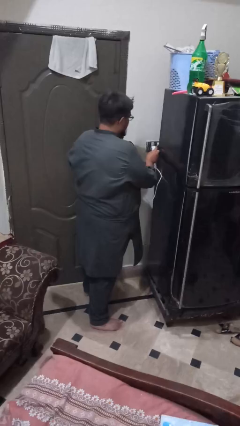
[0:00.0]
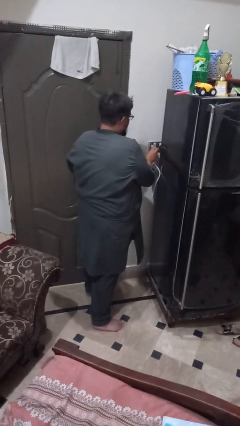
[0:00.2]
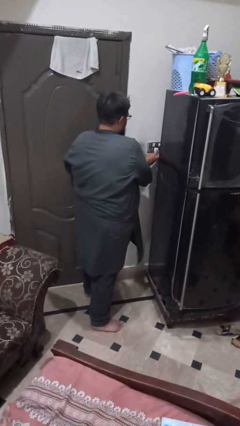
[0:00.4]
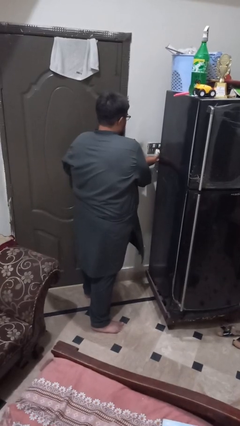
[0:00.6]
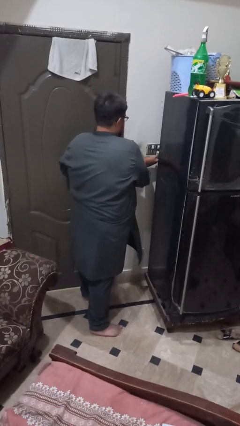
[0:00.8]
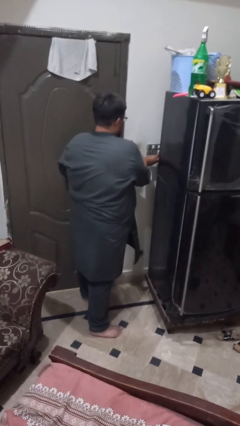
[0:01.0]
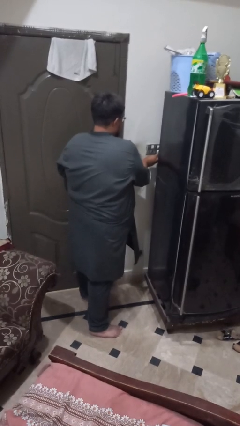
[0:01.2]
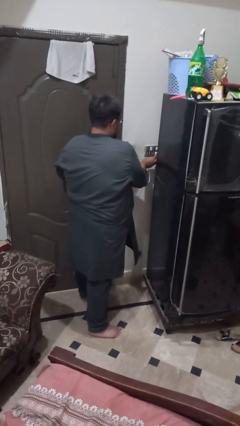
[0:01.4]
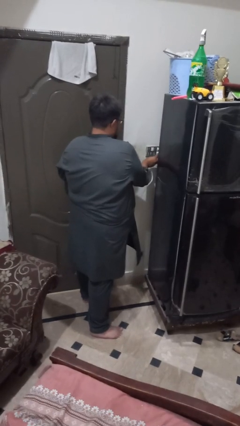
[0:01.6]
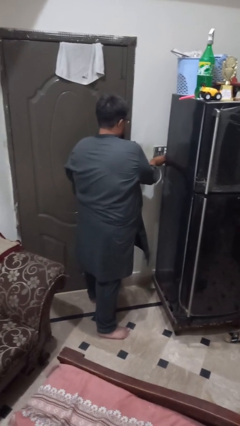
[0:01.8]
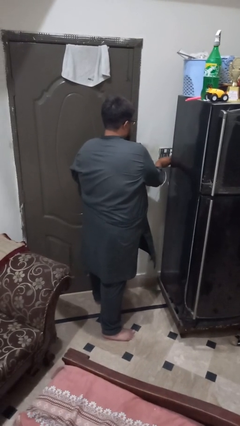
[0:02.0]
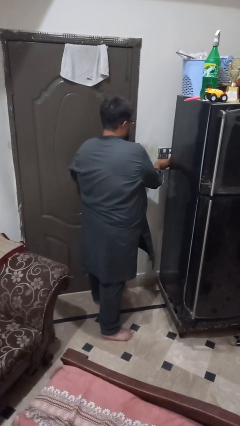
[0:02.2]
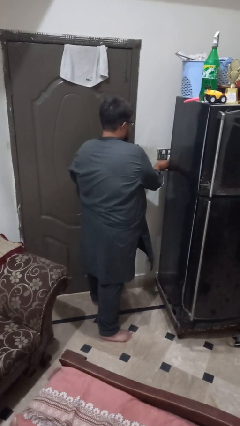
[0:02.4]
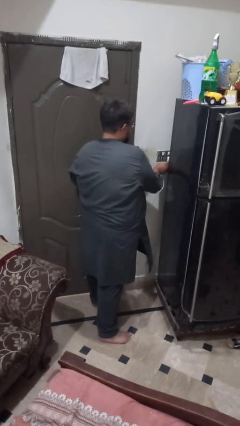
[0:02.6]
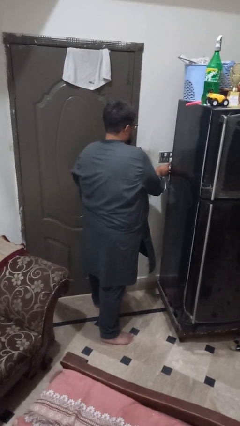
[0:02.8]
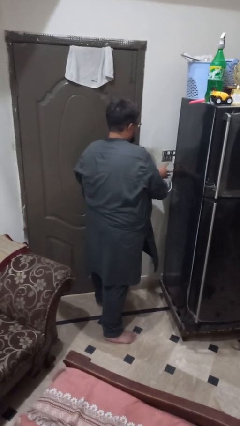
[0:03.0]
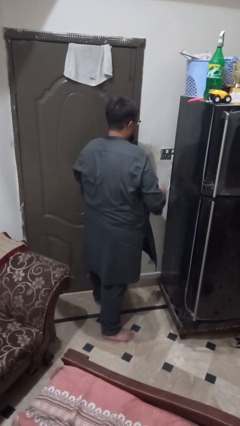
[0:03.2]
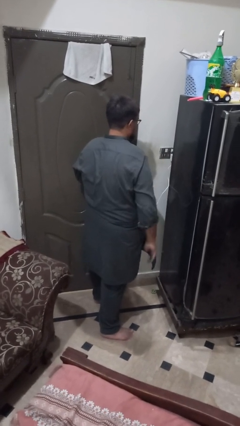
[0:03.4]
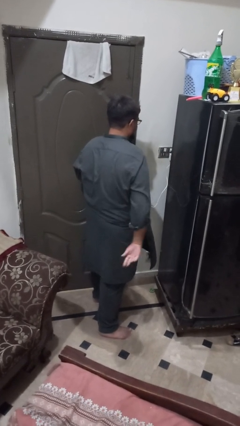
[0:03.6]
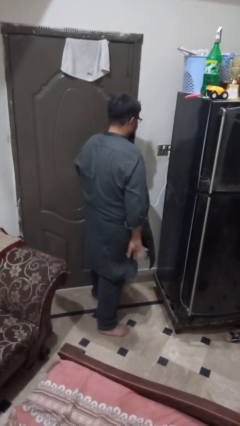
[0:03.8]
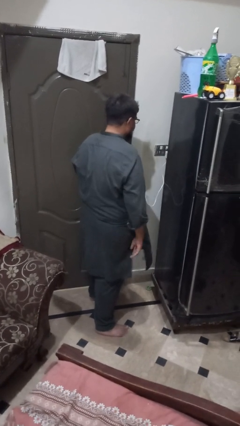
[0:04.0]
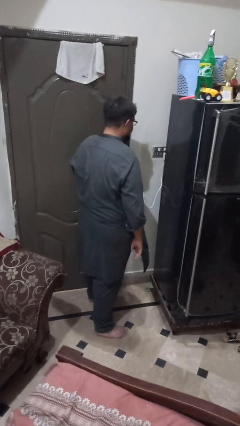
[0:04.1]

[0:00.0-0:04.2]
person plugs into electrical socket

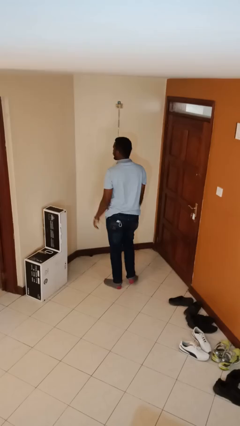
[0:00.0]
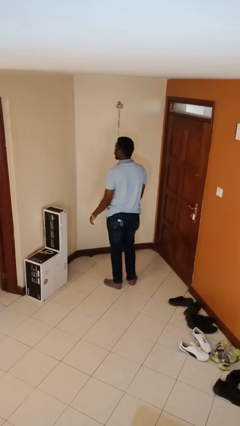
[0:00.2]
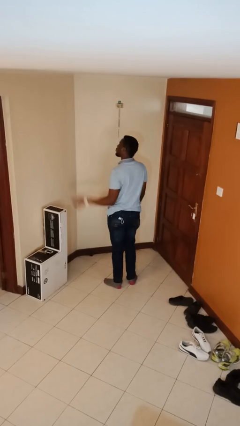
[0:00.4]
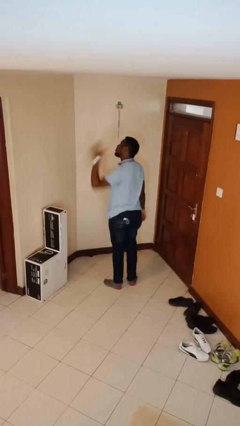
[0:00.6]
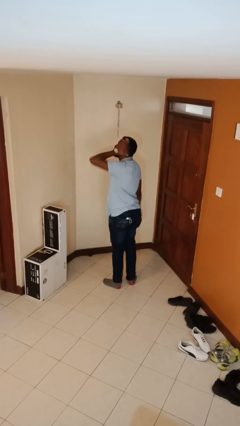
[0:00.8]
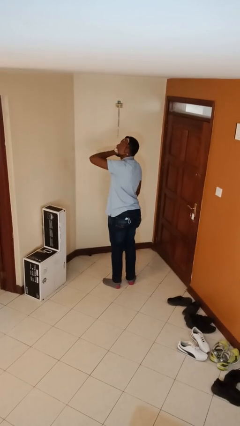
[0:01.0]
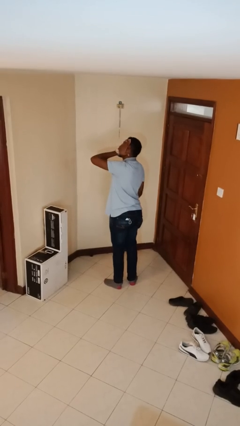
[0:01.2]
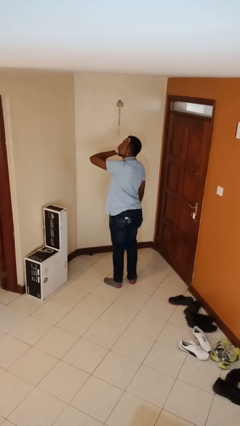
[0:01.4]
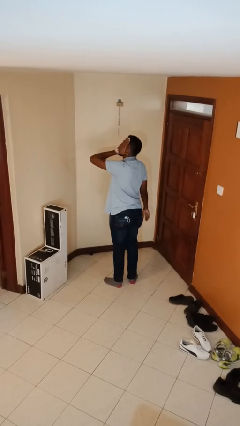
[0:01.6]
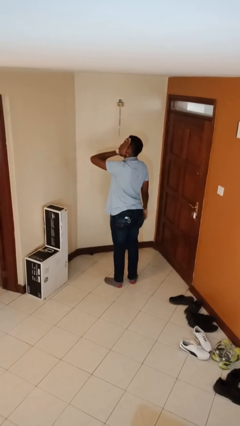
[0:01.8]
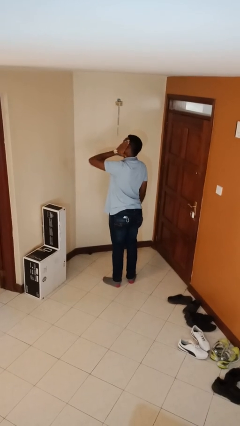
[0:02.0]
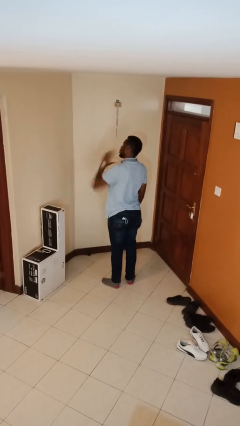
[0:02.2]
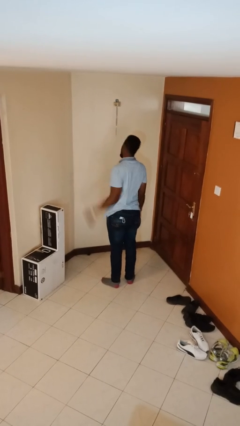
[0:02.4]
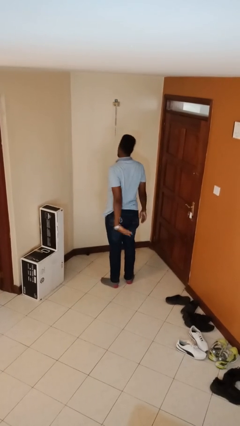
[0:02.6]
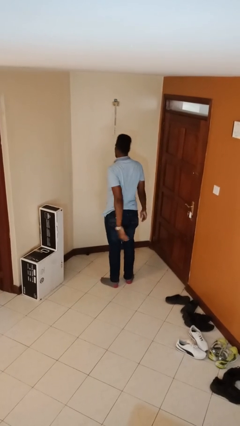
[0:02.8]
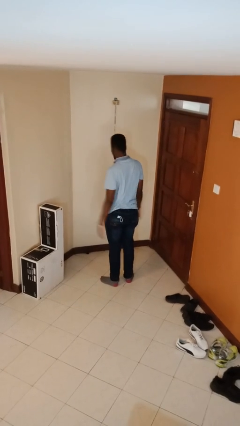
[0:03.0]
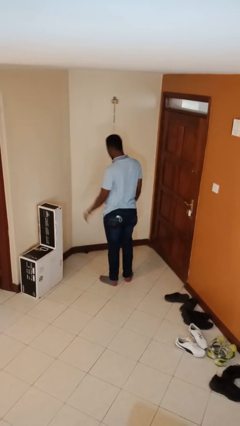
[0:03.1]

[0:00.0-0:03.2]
person swats bug

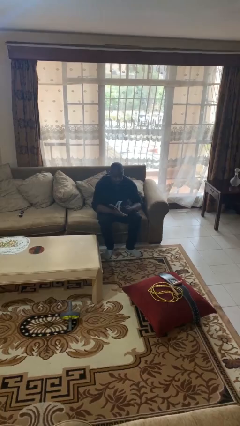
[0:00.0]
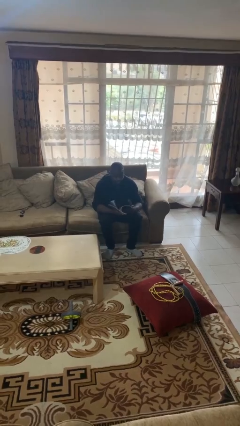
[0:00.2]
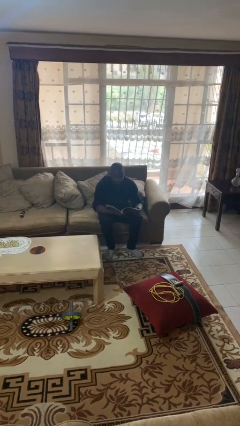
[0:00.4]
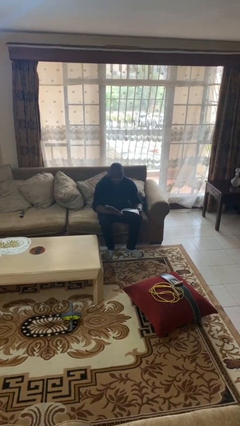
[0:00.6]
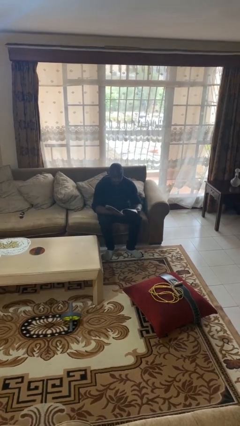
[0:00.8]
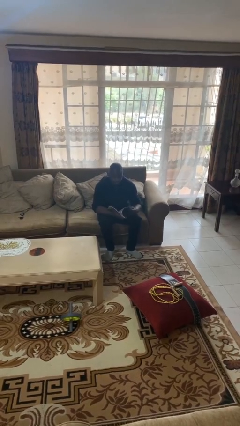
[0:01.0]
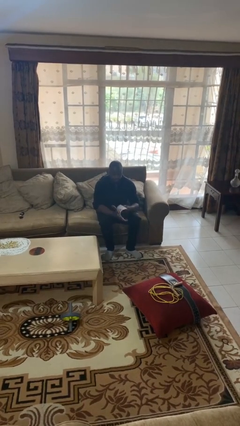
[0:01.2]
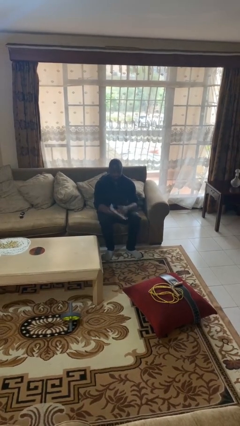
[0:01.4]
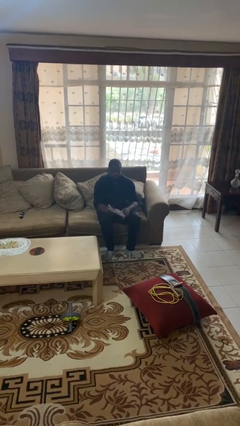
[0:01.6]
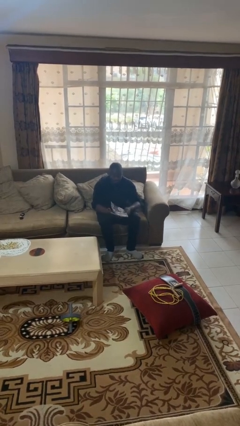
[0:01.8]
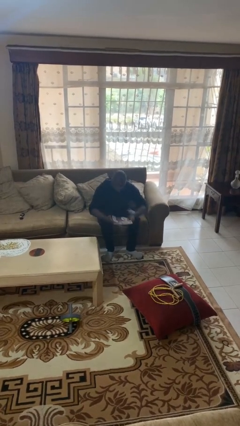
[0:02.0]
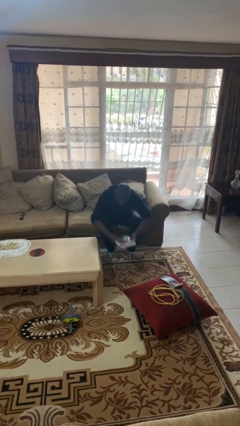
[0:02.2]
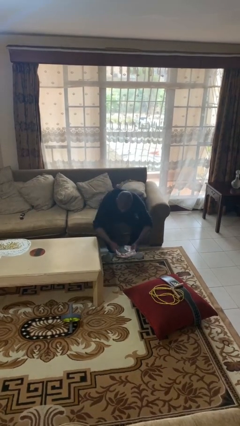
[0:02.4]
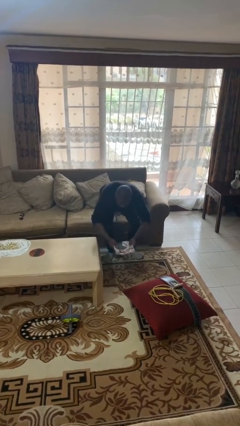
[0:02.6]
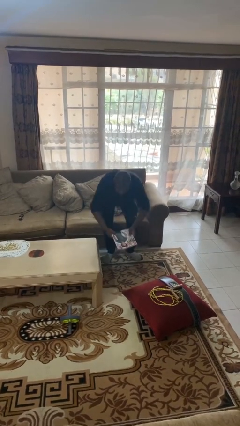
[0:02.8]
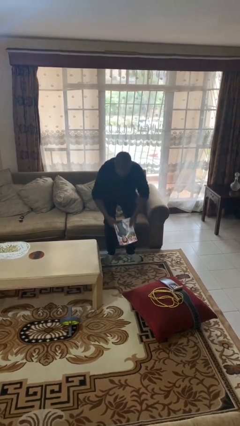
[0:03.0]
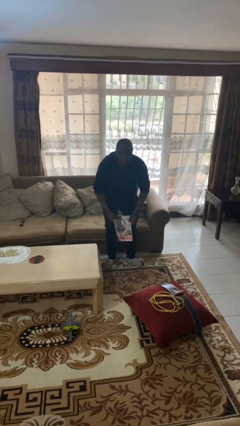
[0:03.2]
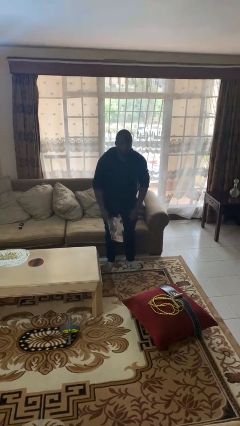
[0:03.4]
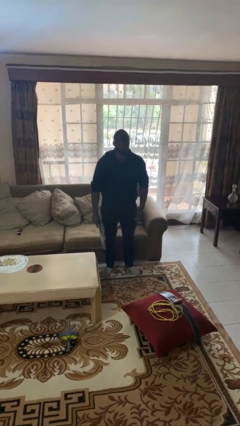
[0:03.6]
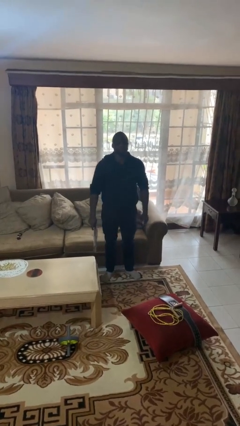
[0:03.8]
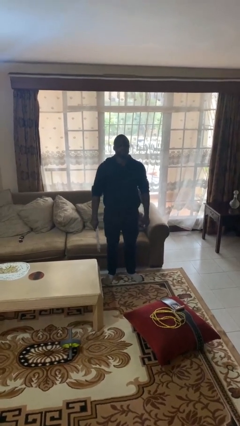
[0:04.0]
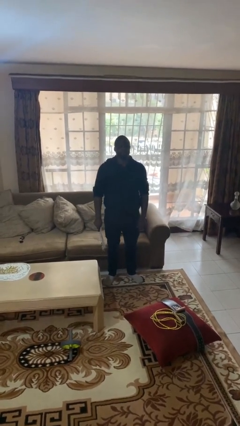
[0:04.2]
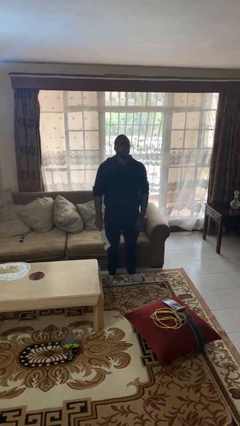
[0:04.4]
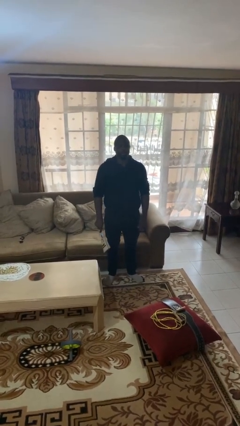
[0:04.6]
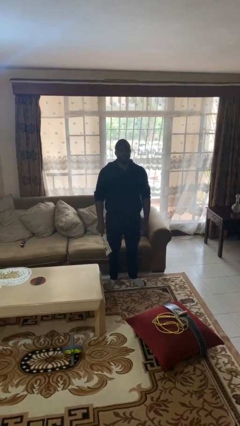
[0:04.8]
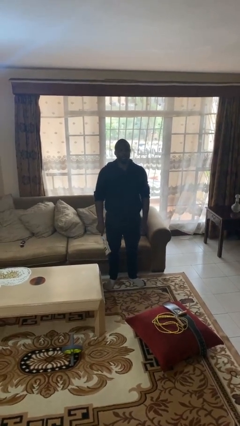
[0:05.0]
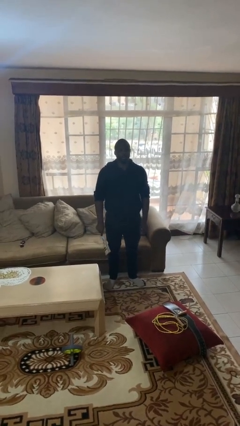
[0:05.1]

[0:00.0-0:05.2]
person stands up

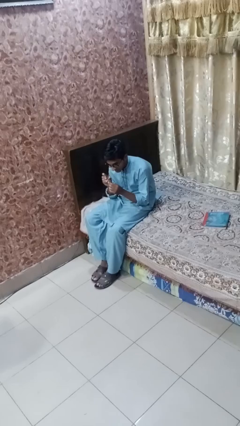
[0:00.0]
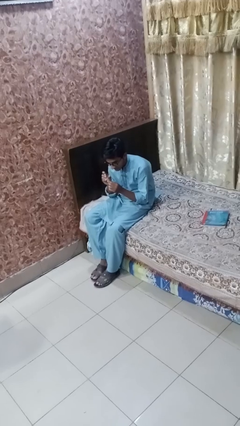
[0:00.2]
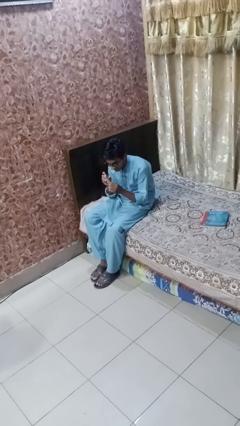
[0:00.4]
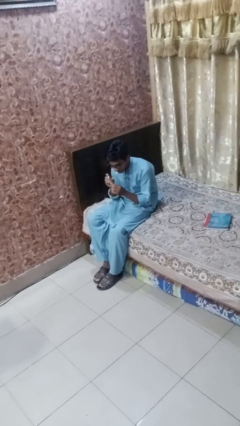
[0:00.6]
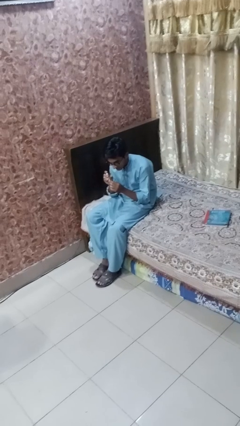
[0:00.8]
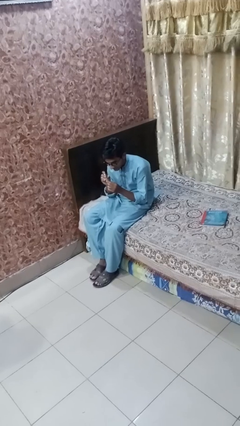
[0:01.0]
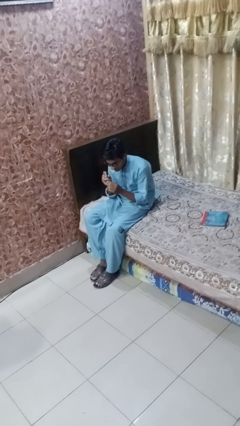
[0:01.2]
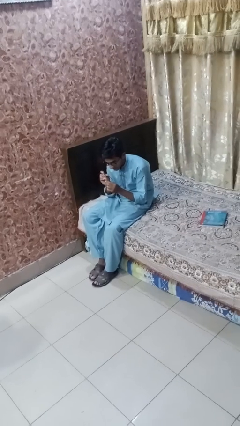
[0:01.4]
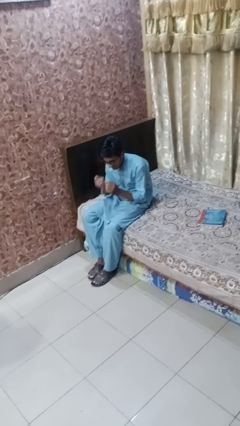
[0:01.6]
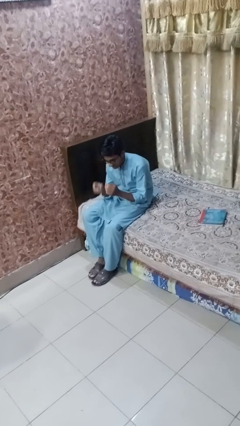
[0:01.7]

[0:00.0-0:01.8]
person clips fingernails

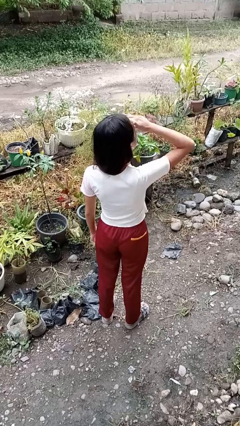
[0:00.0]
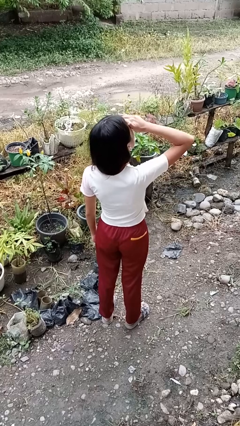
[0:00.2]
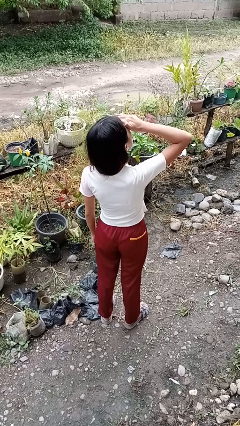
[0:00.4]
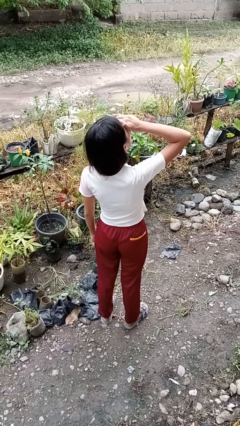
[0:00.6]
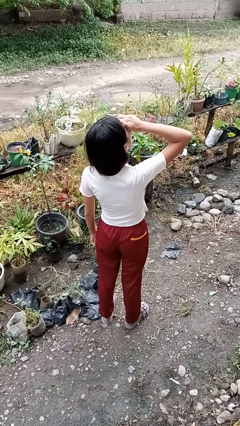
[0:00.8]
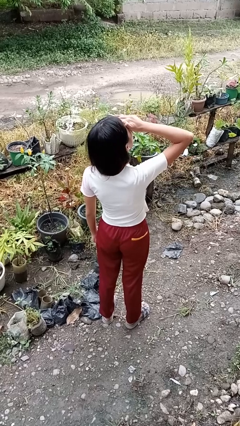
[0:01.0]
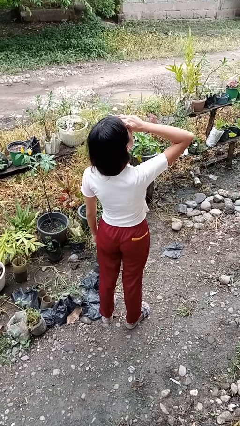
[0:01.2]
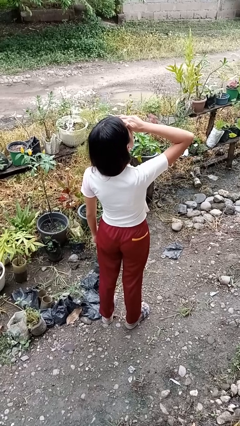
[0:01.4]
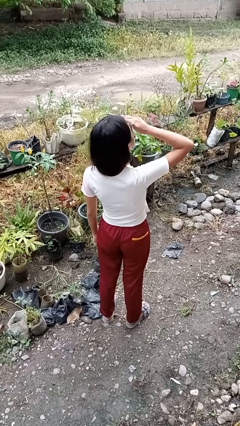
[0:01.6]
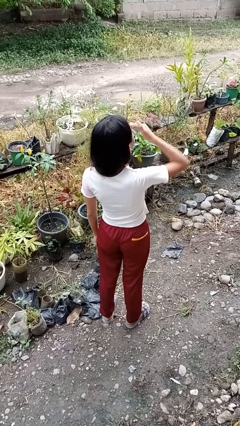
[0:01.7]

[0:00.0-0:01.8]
person shades eyes

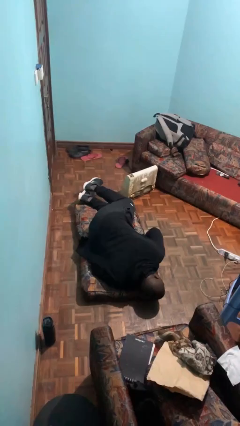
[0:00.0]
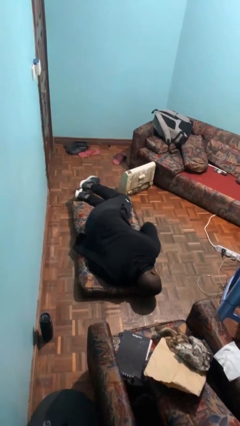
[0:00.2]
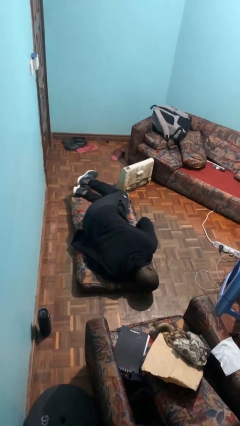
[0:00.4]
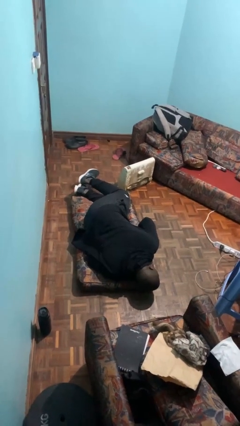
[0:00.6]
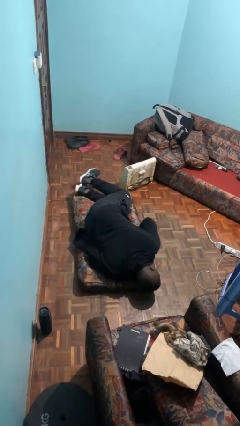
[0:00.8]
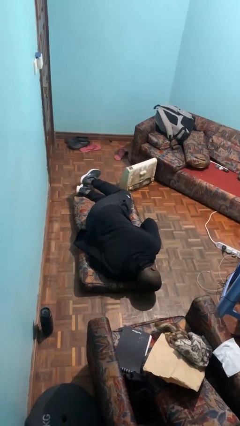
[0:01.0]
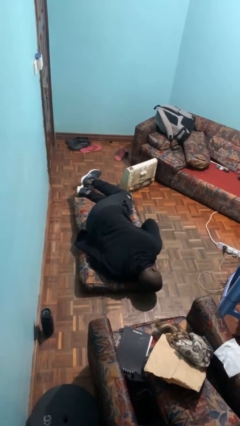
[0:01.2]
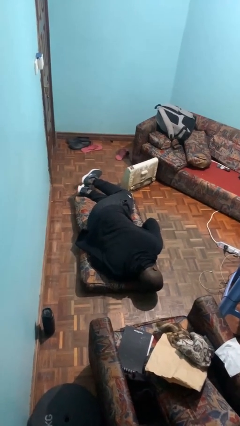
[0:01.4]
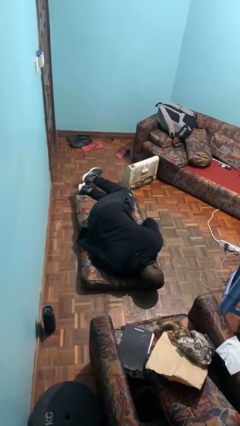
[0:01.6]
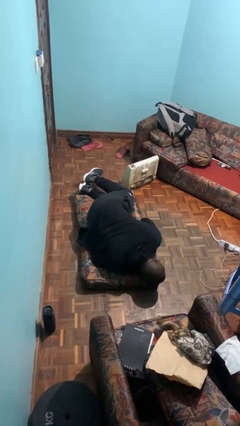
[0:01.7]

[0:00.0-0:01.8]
person lies down on floor
